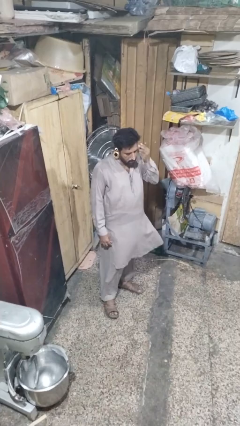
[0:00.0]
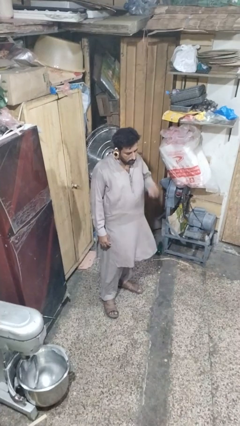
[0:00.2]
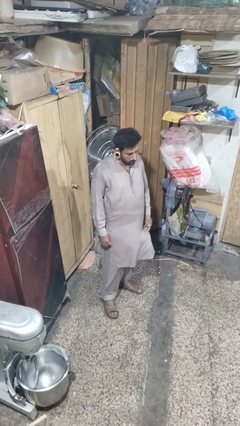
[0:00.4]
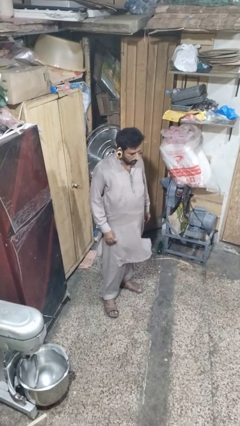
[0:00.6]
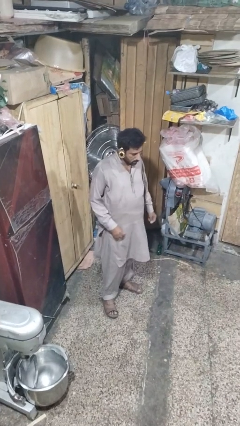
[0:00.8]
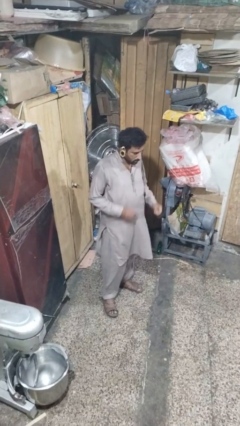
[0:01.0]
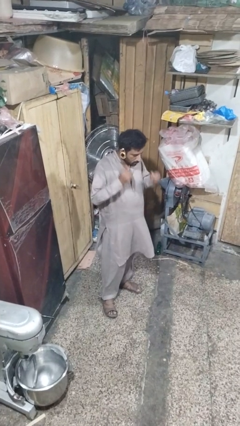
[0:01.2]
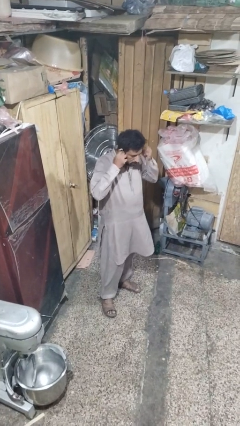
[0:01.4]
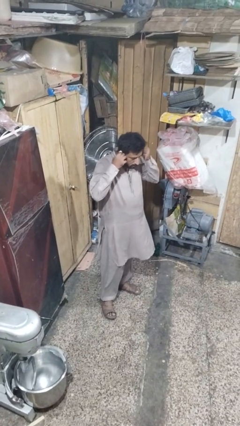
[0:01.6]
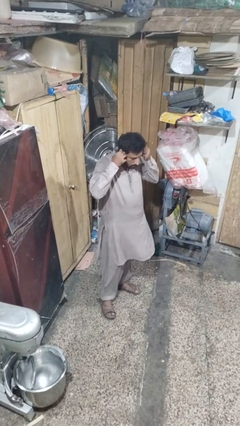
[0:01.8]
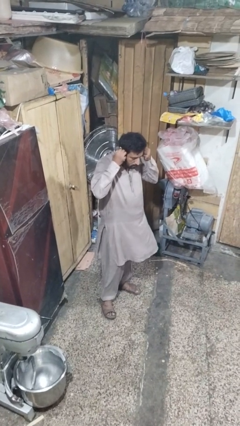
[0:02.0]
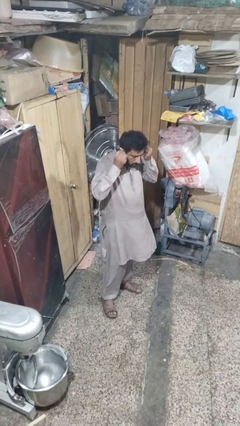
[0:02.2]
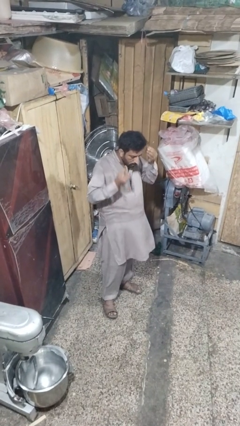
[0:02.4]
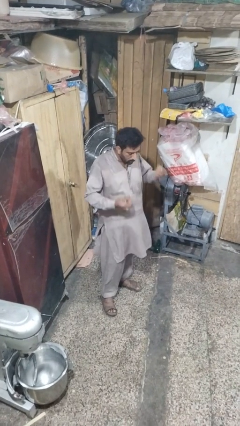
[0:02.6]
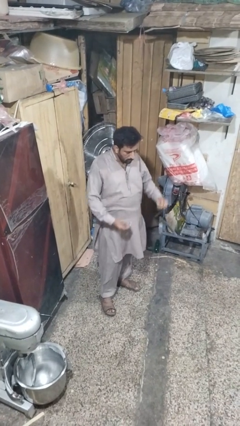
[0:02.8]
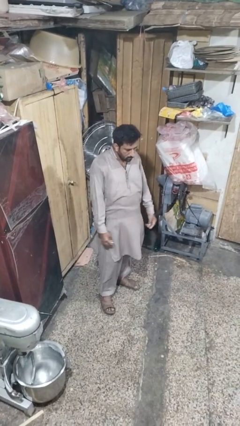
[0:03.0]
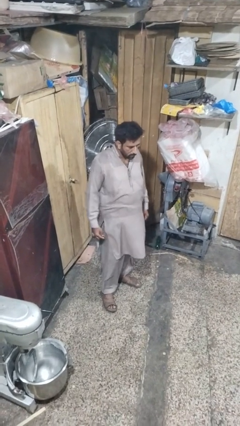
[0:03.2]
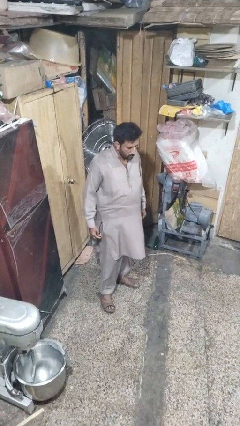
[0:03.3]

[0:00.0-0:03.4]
person takes off earrings

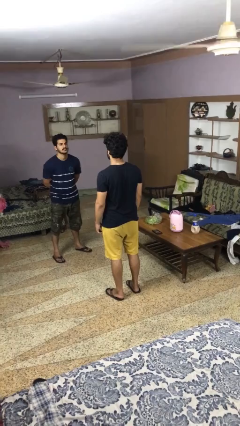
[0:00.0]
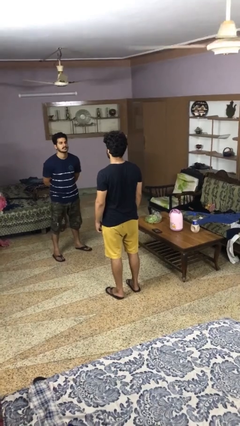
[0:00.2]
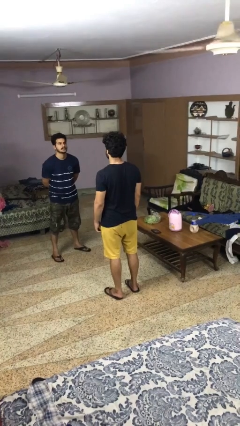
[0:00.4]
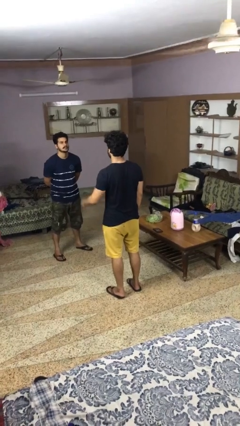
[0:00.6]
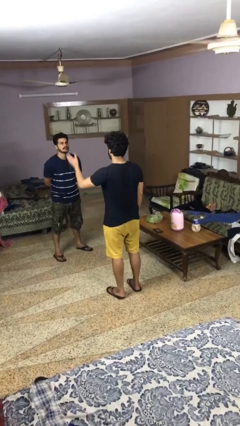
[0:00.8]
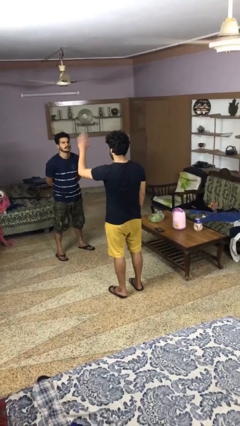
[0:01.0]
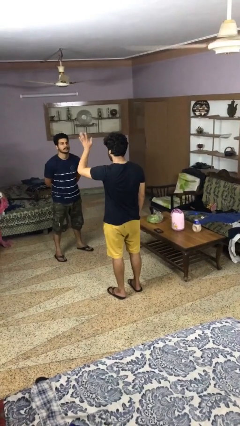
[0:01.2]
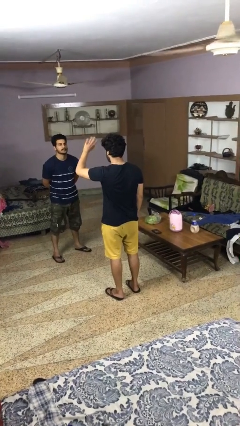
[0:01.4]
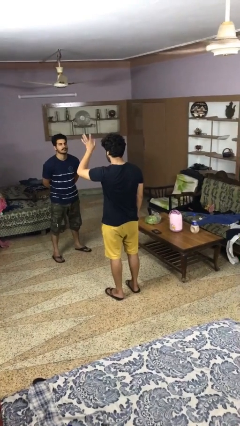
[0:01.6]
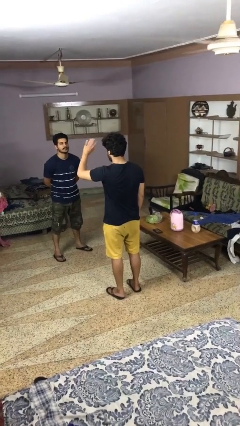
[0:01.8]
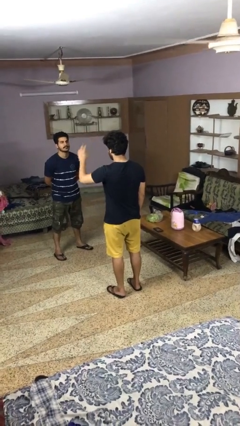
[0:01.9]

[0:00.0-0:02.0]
person waves at person

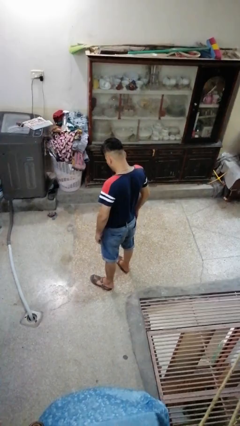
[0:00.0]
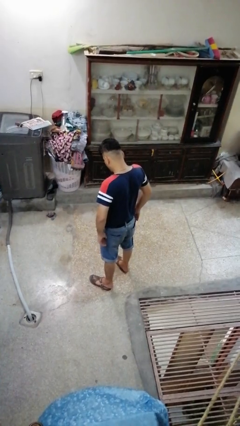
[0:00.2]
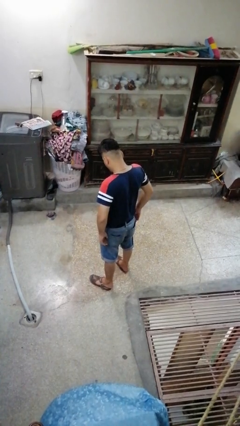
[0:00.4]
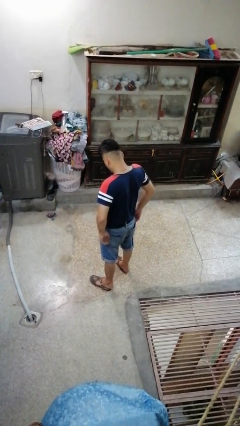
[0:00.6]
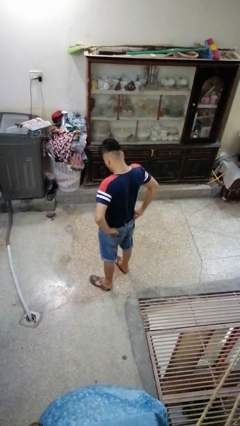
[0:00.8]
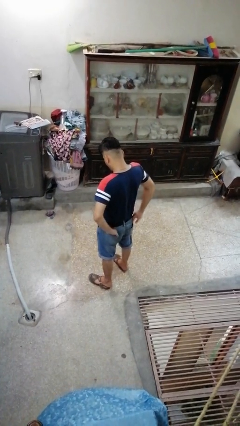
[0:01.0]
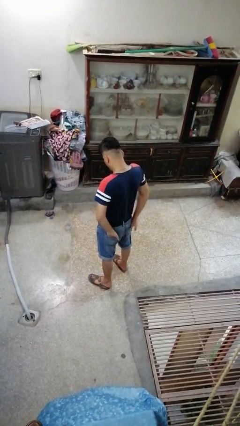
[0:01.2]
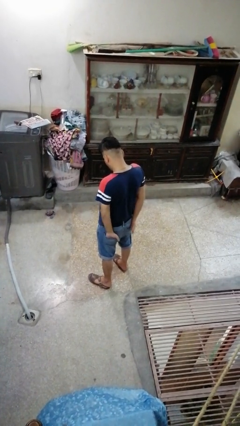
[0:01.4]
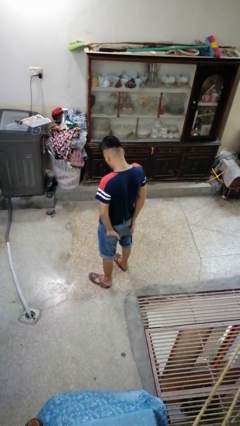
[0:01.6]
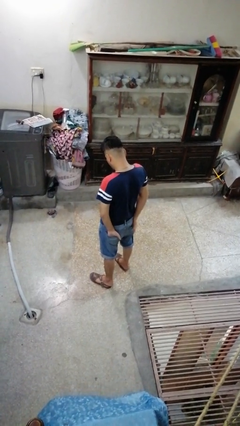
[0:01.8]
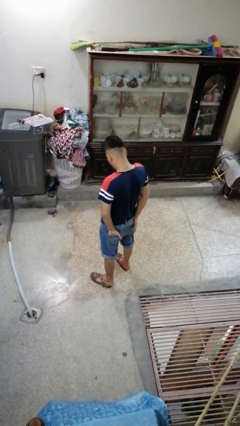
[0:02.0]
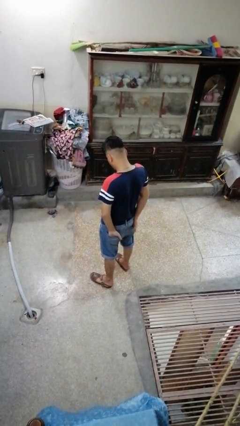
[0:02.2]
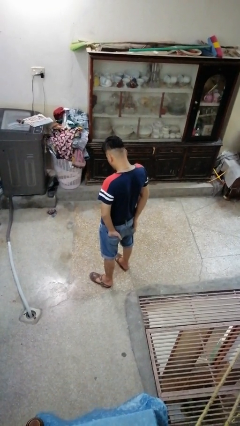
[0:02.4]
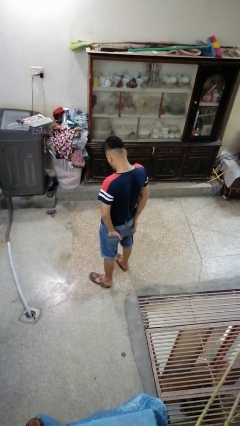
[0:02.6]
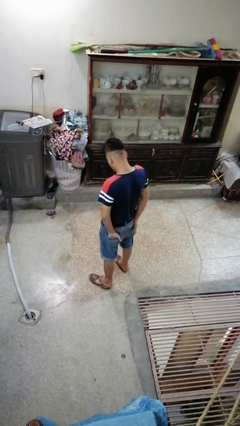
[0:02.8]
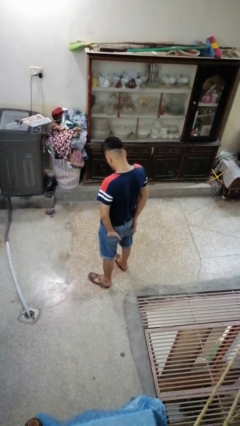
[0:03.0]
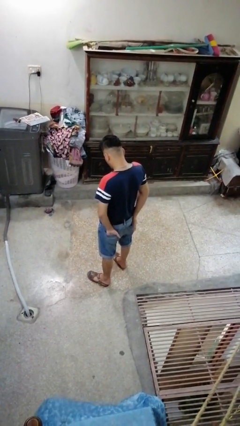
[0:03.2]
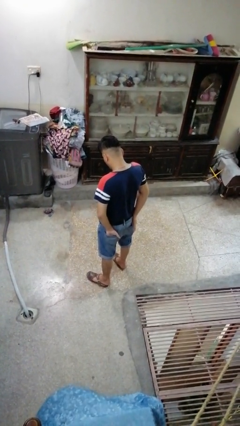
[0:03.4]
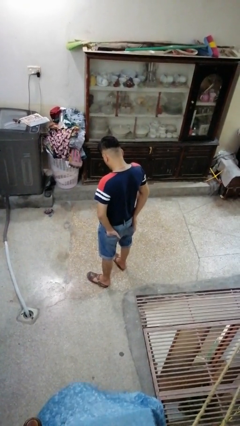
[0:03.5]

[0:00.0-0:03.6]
person puts hands in back pockets

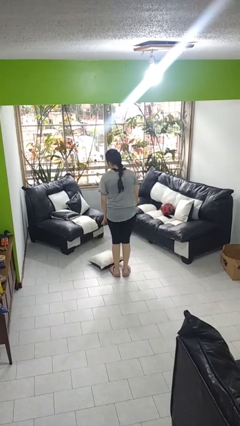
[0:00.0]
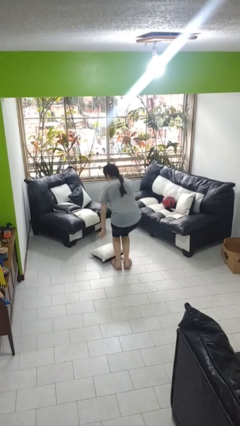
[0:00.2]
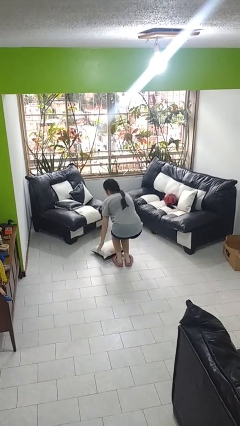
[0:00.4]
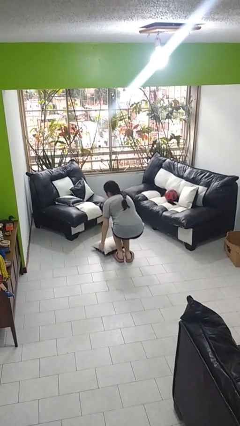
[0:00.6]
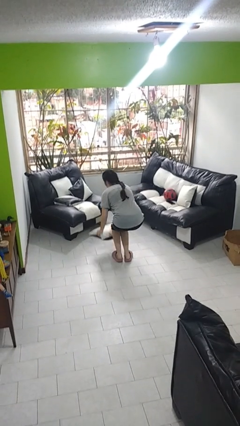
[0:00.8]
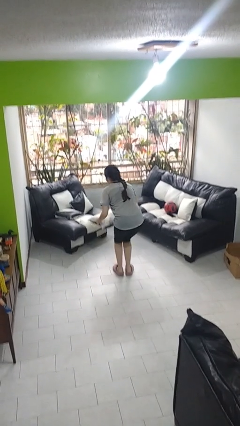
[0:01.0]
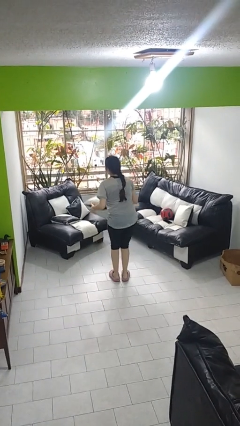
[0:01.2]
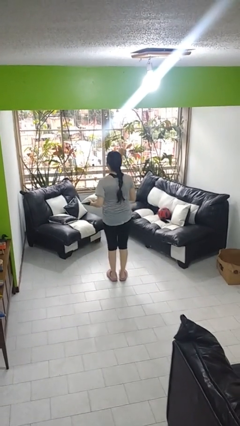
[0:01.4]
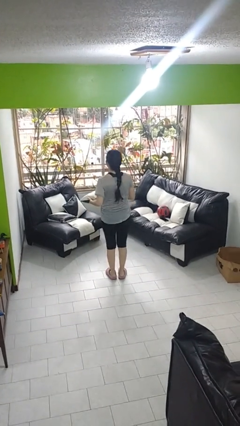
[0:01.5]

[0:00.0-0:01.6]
person picks up object from floor

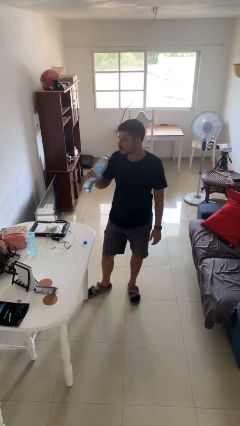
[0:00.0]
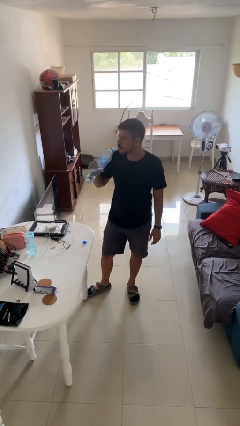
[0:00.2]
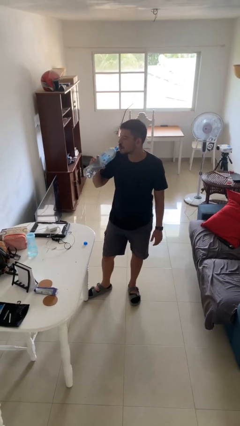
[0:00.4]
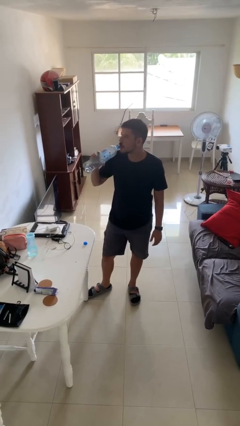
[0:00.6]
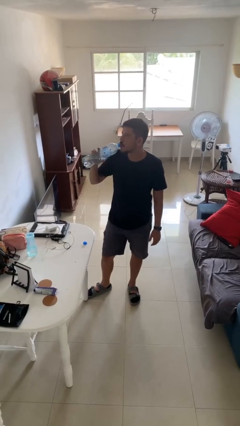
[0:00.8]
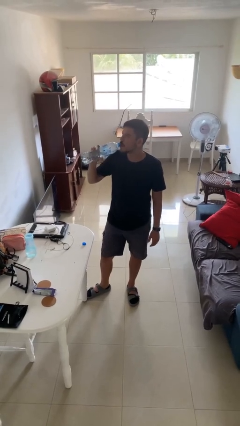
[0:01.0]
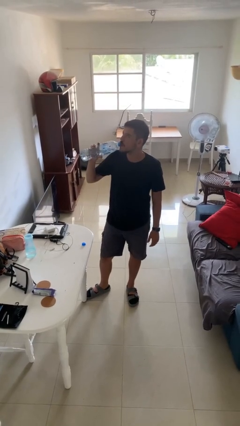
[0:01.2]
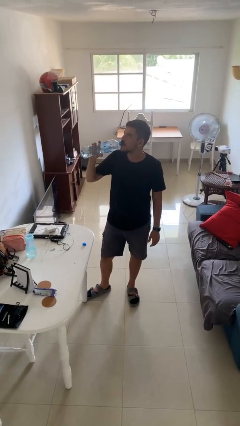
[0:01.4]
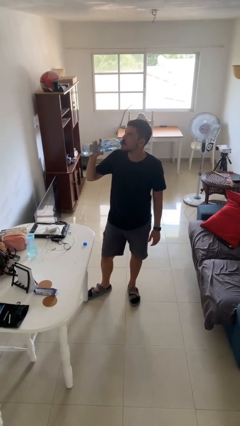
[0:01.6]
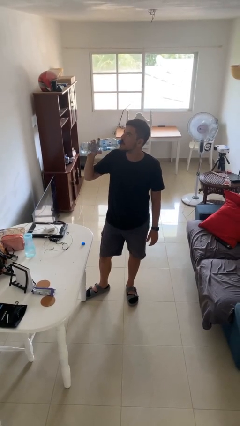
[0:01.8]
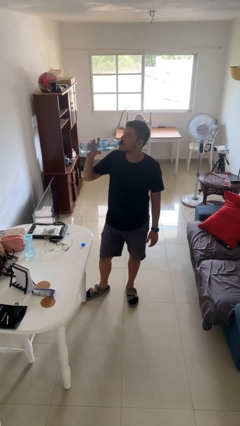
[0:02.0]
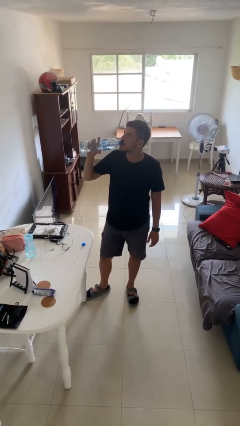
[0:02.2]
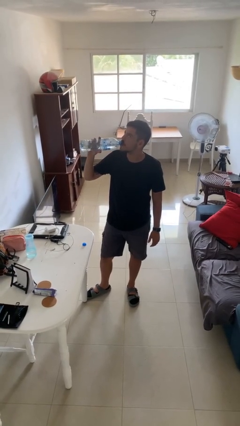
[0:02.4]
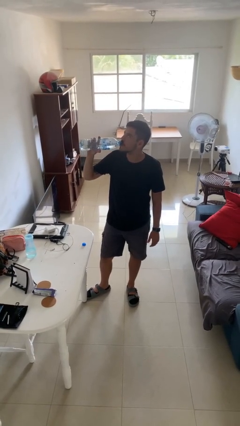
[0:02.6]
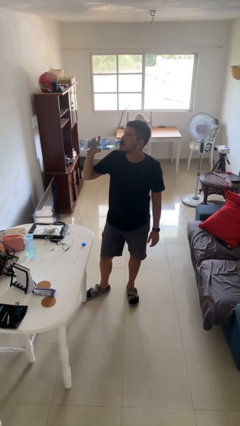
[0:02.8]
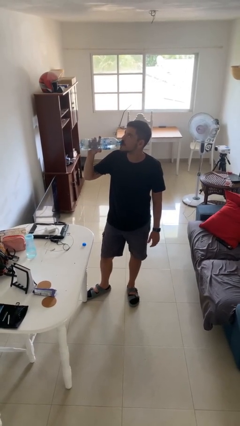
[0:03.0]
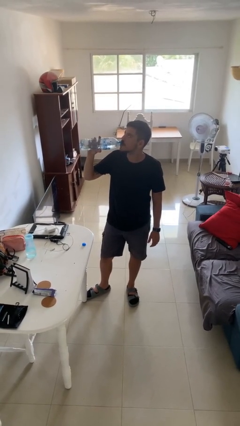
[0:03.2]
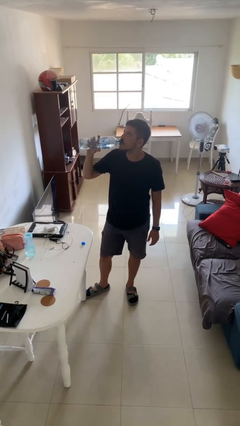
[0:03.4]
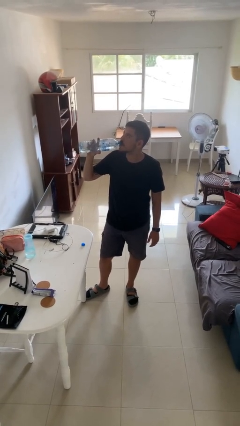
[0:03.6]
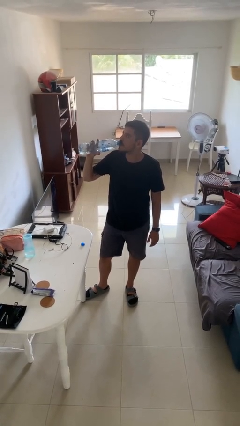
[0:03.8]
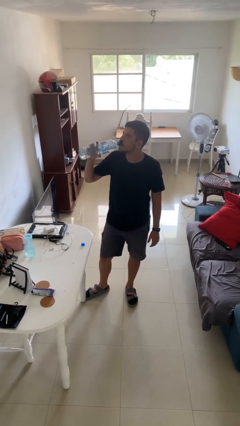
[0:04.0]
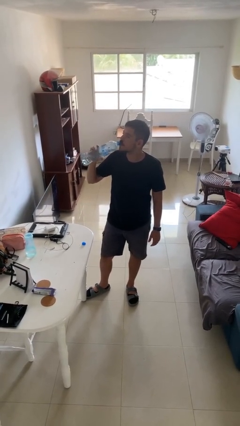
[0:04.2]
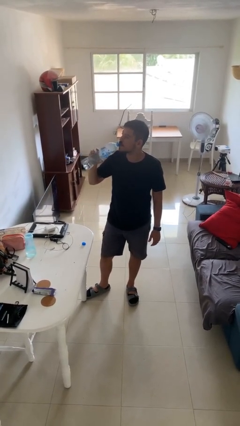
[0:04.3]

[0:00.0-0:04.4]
person drinks from bottle

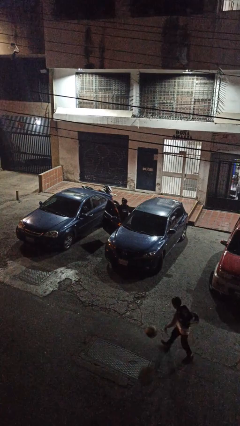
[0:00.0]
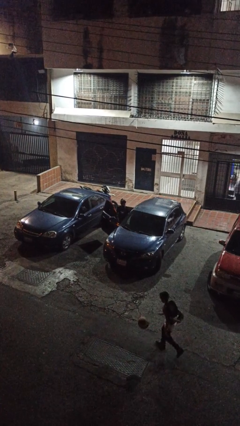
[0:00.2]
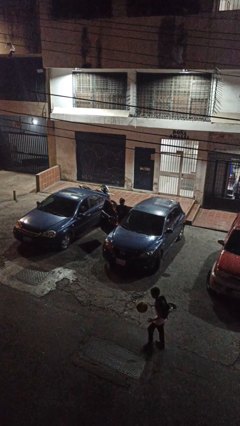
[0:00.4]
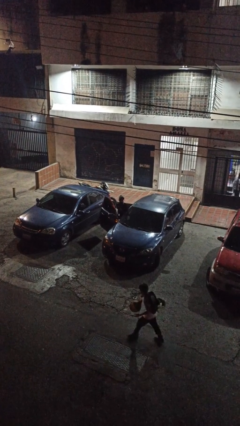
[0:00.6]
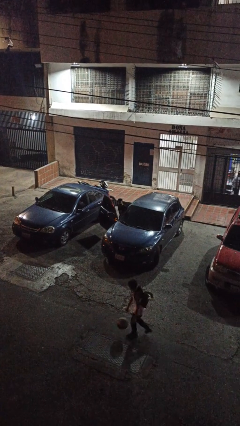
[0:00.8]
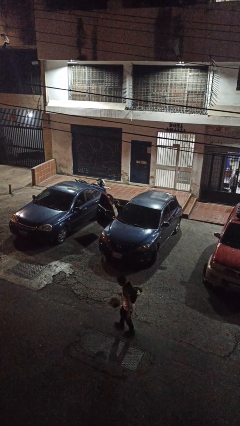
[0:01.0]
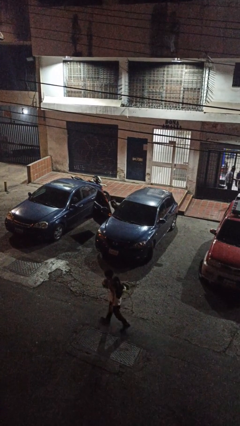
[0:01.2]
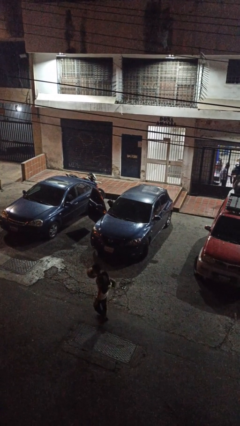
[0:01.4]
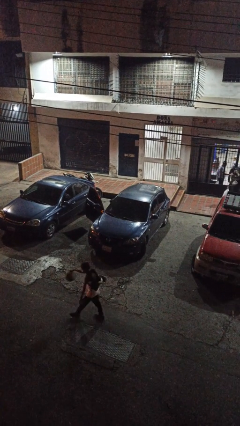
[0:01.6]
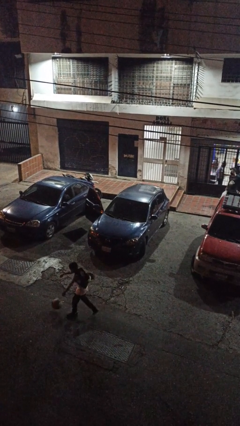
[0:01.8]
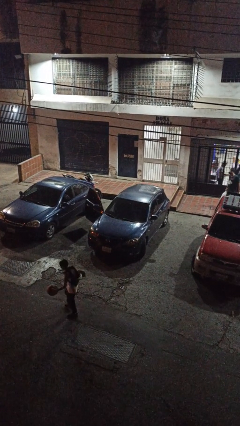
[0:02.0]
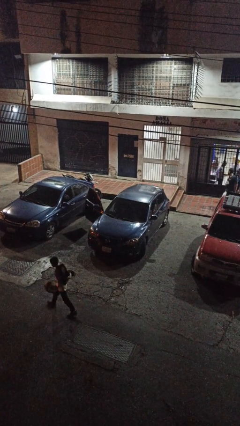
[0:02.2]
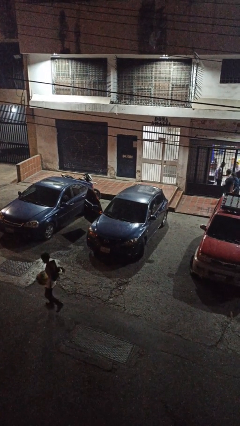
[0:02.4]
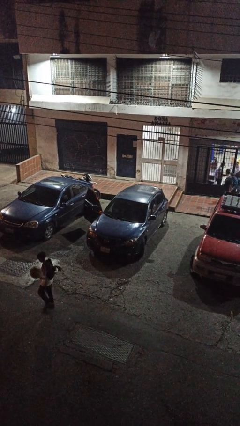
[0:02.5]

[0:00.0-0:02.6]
person enters car
